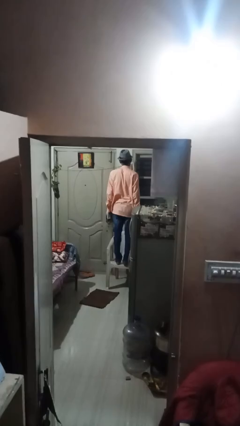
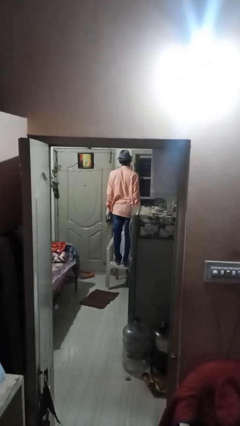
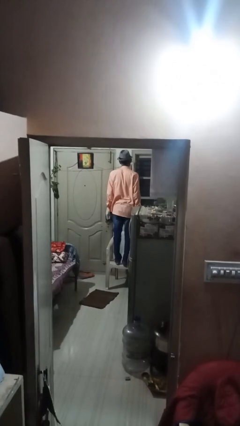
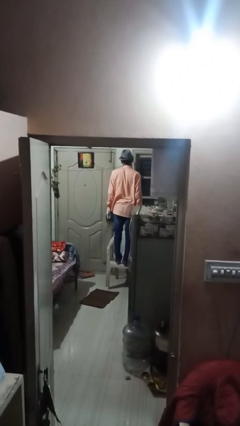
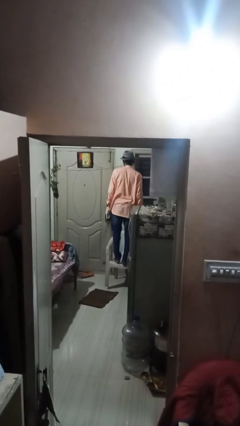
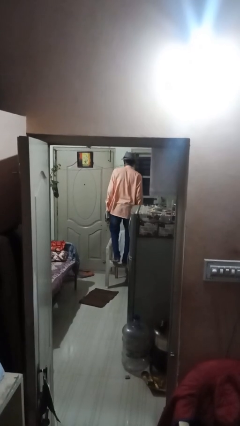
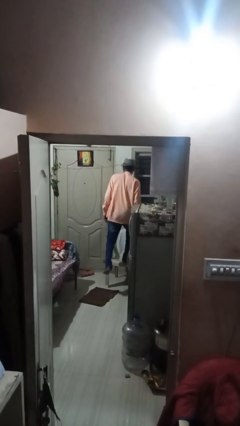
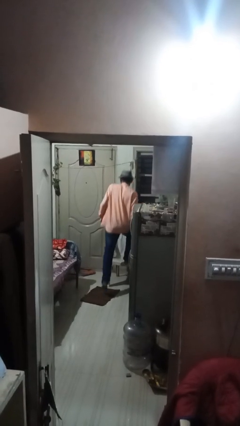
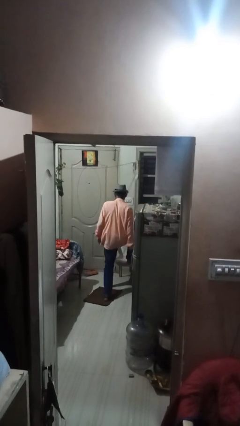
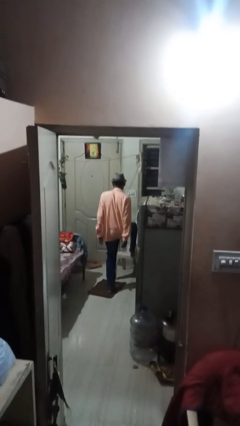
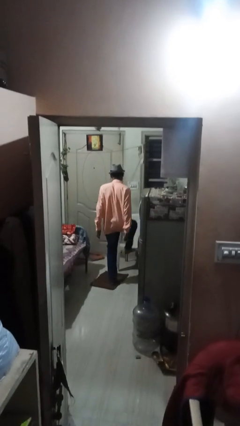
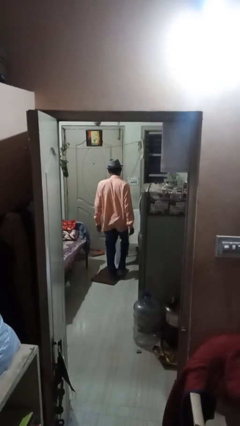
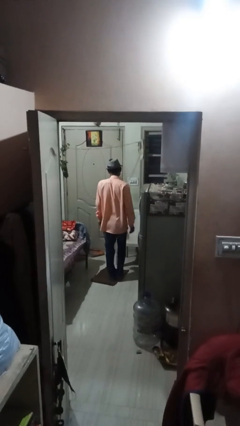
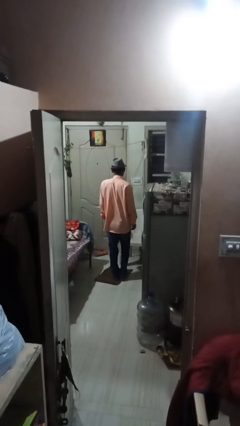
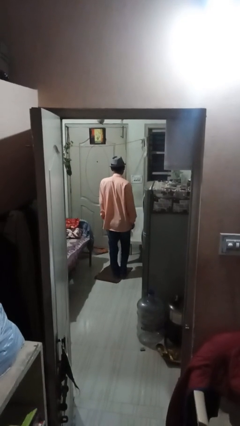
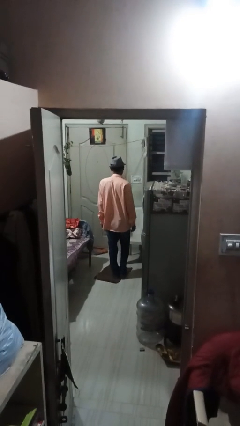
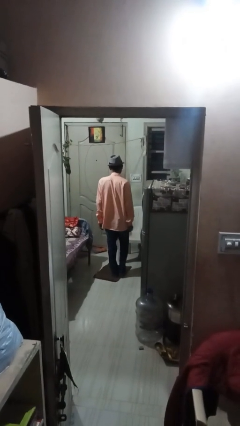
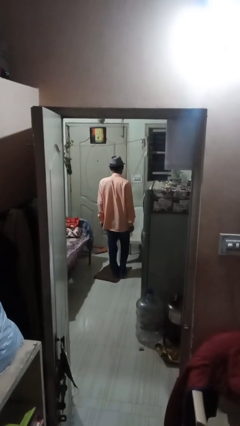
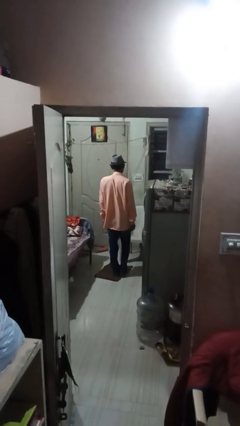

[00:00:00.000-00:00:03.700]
person climbs off chair

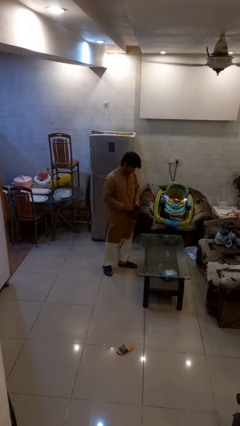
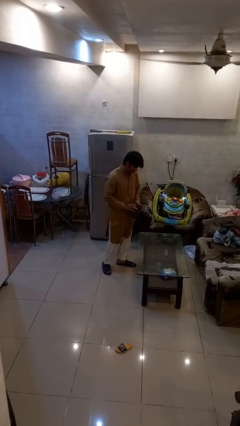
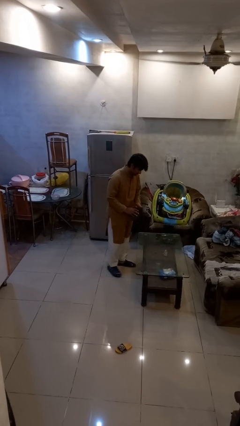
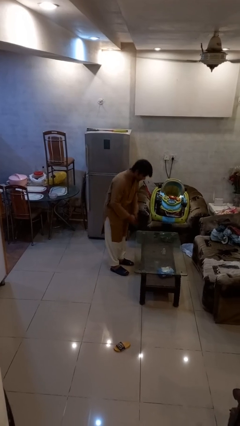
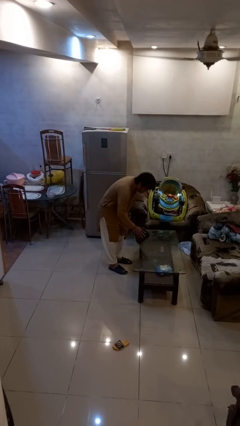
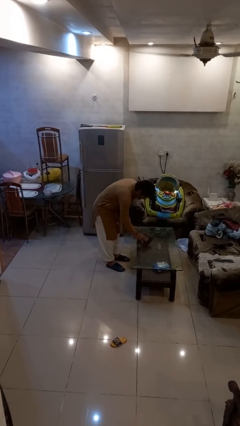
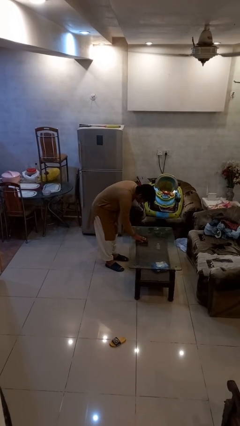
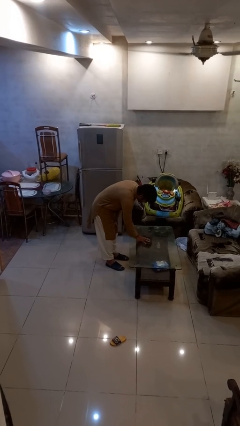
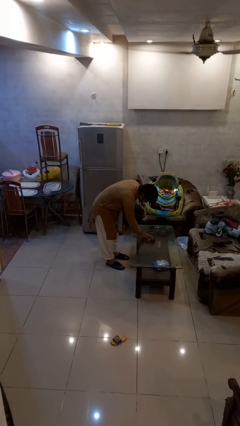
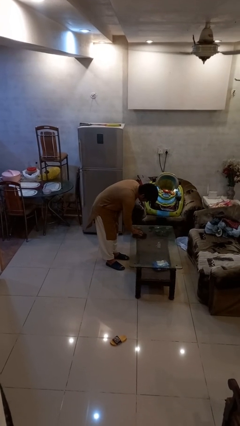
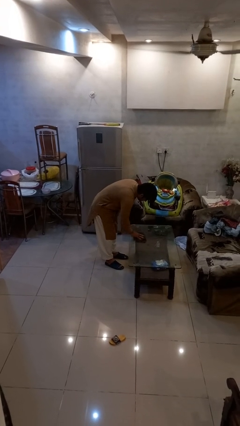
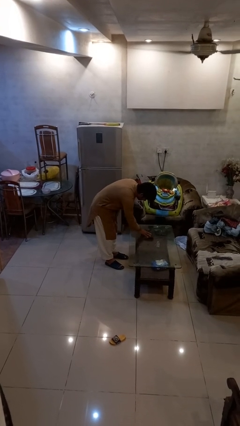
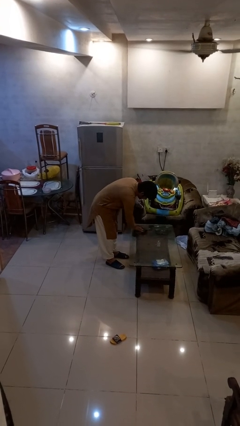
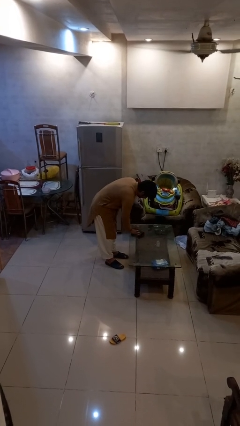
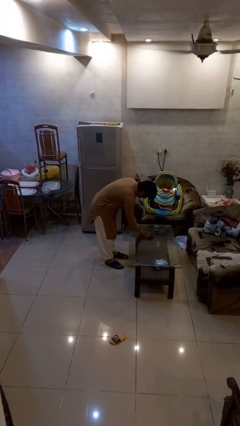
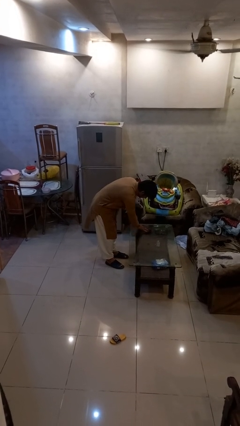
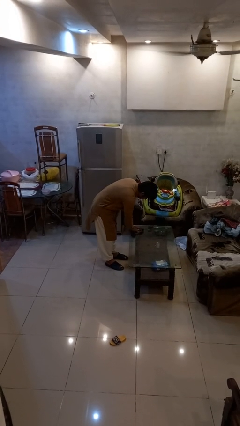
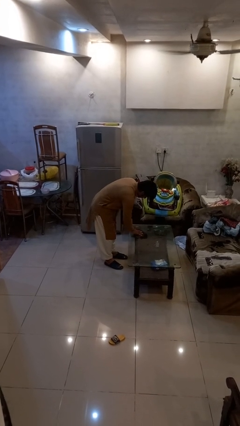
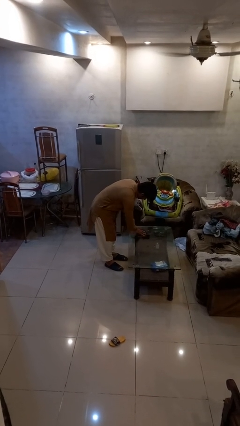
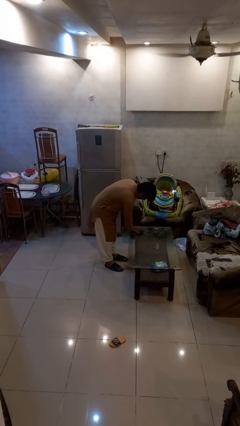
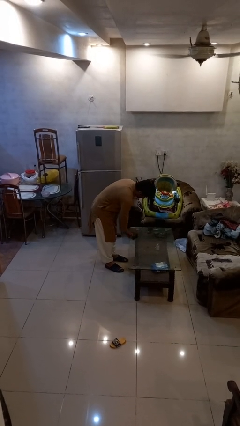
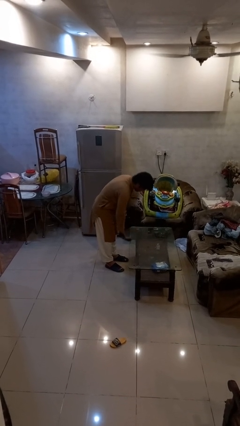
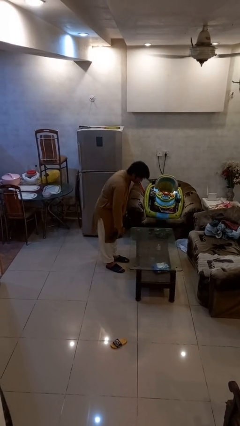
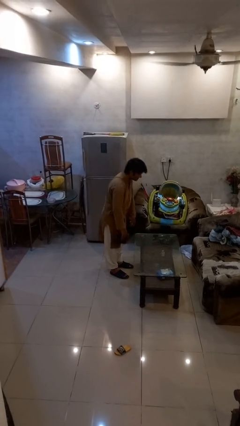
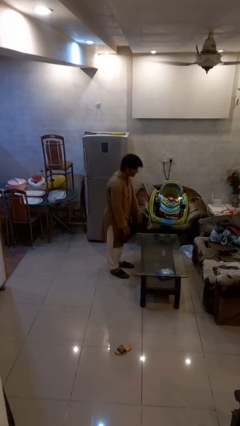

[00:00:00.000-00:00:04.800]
person cleans table with rag

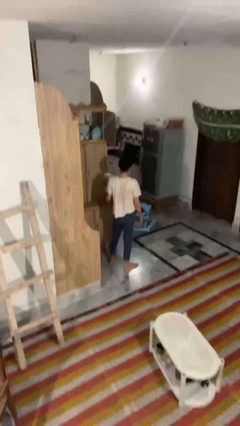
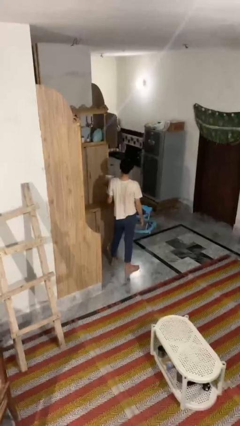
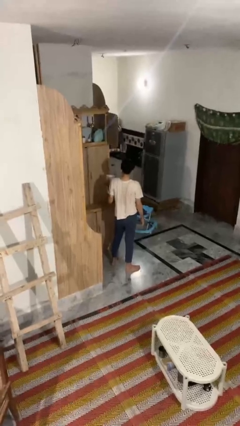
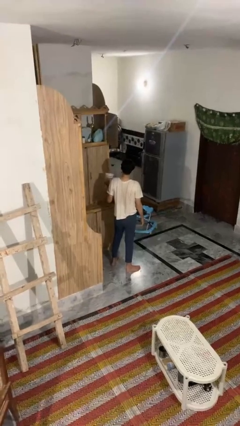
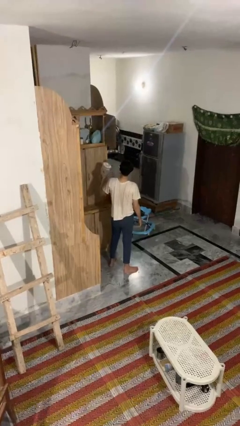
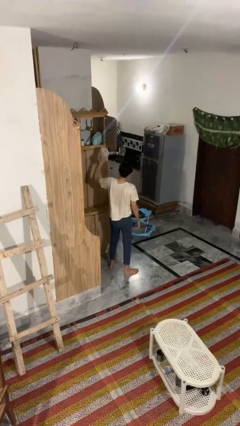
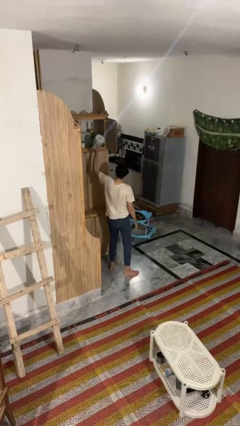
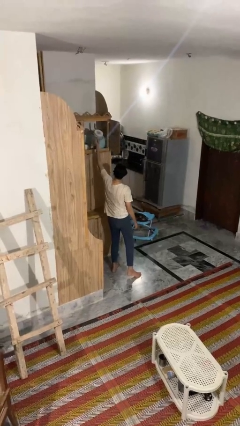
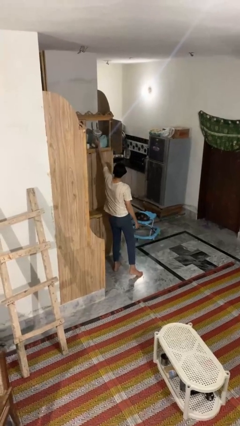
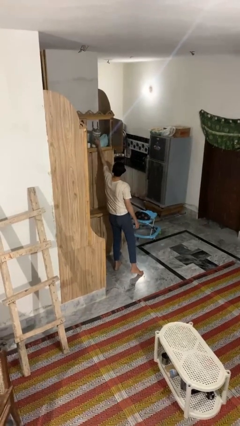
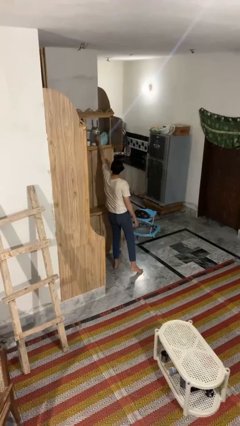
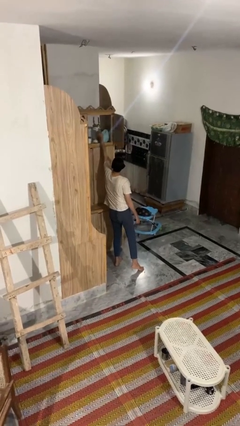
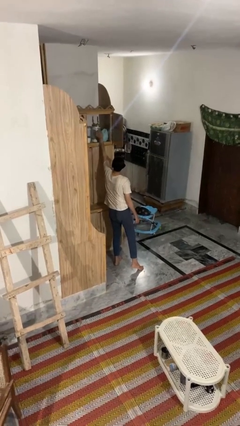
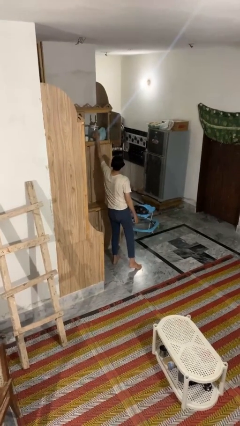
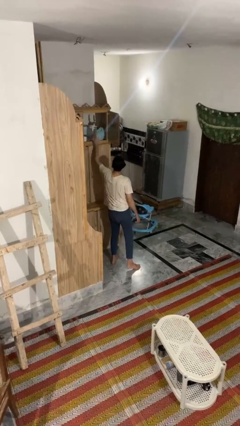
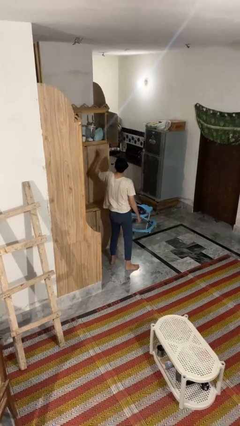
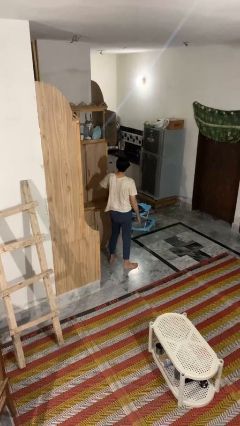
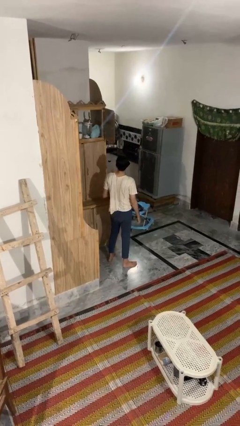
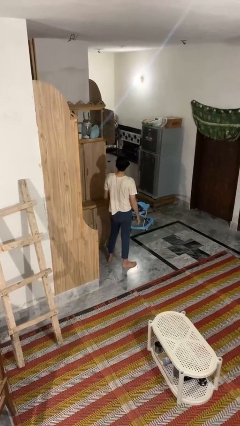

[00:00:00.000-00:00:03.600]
person puts down object on shelf

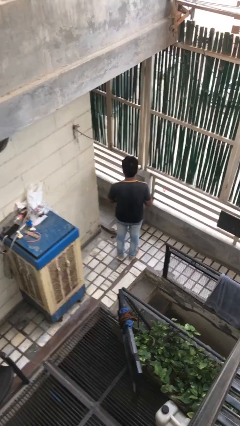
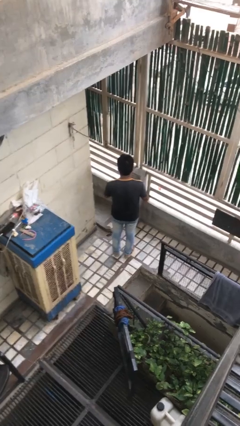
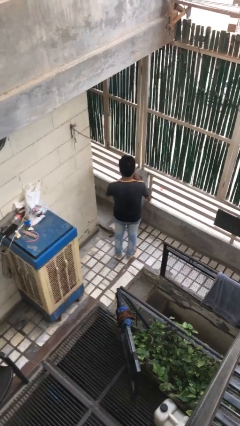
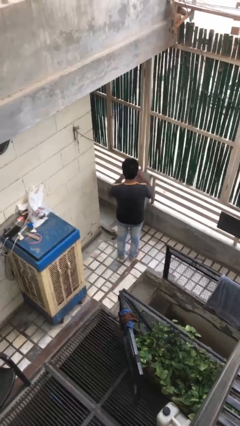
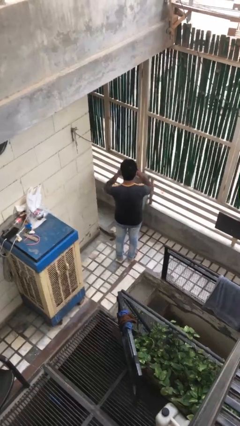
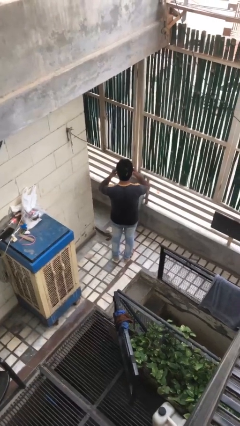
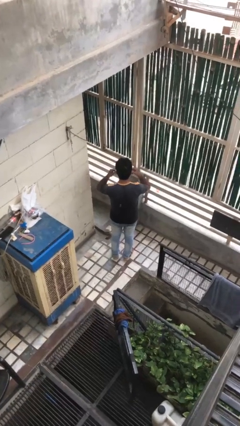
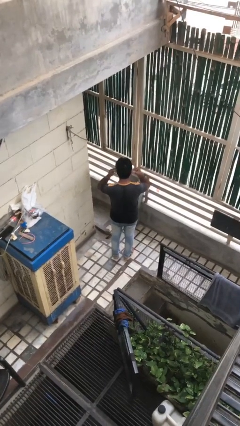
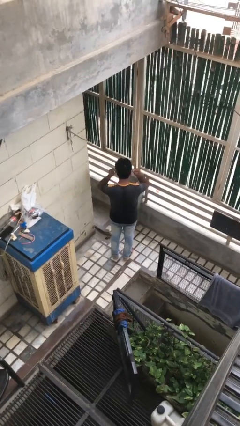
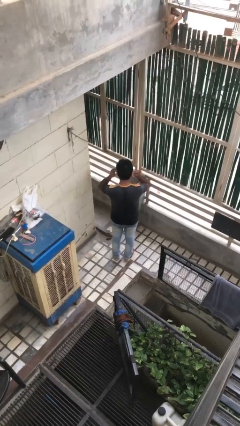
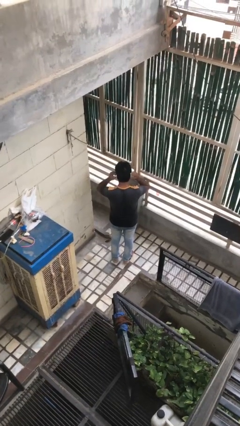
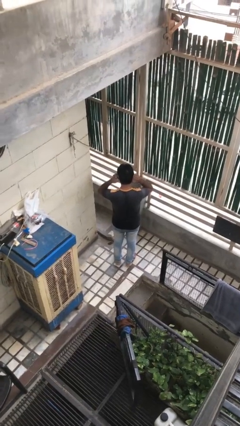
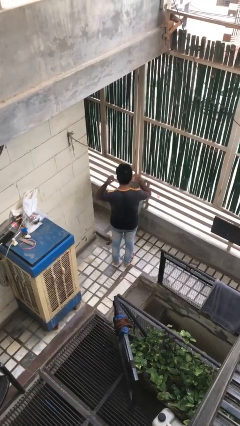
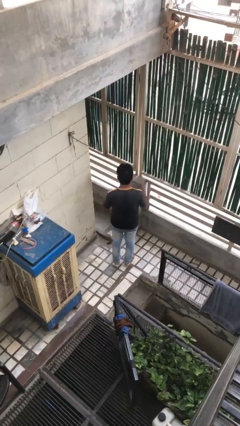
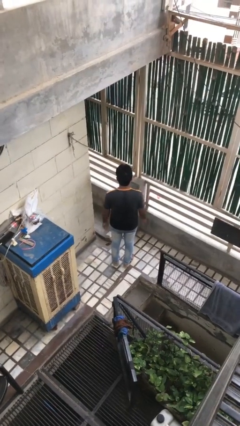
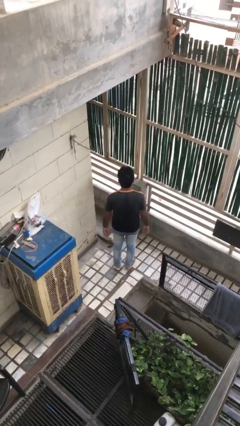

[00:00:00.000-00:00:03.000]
person puts on facemask

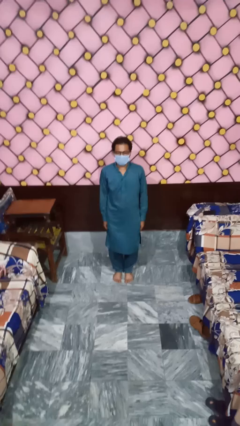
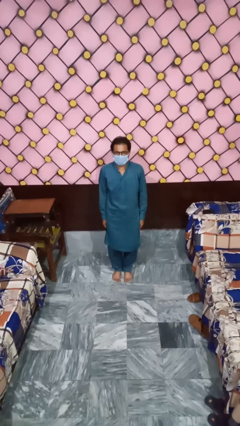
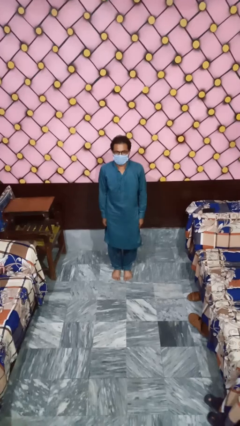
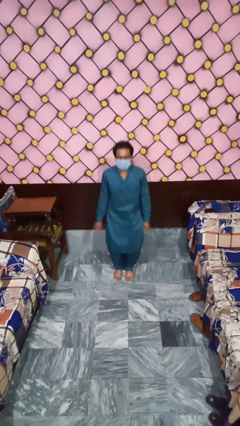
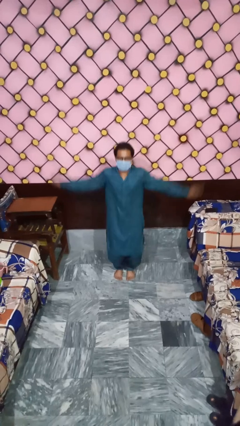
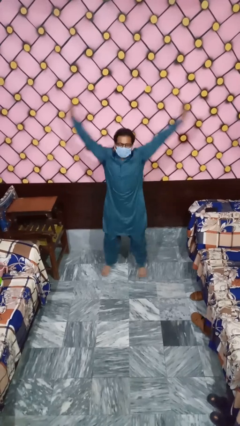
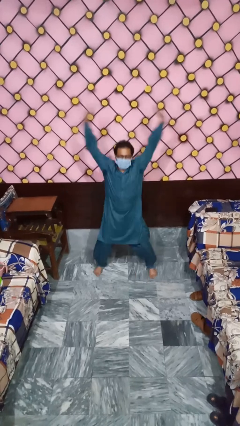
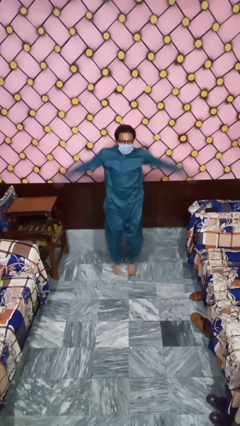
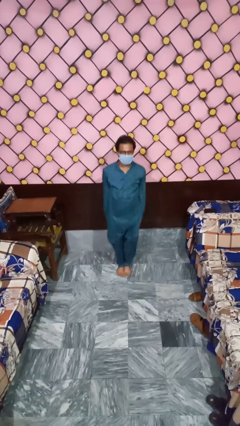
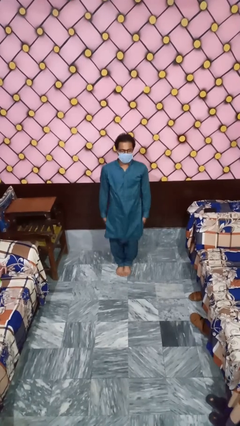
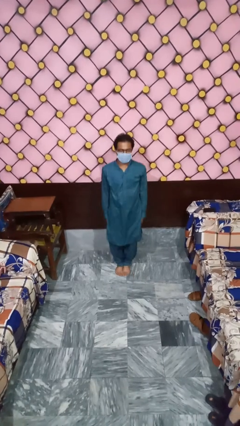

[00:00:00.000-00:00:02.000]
person exercises with jumping jacks

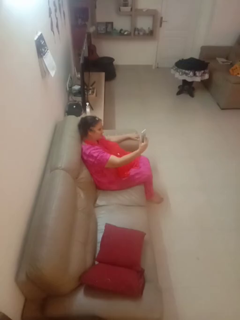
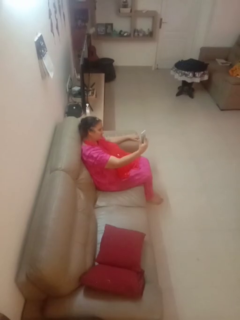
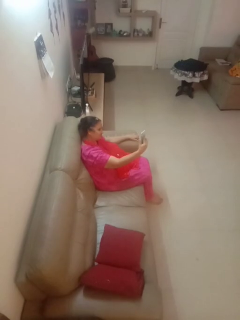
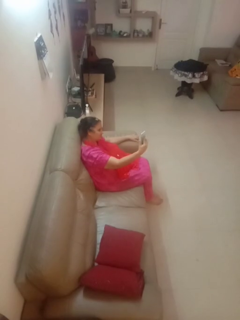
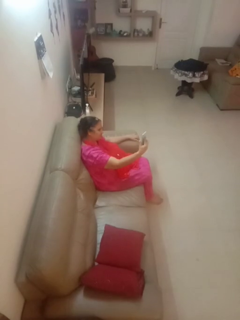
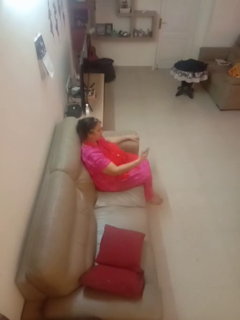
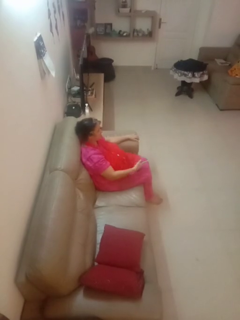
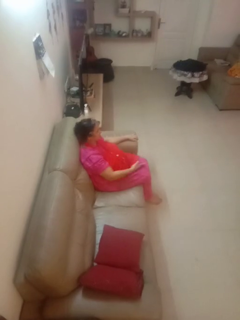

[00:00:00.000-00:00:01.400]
person takes selfie
